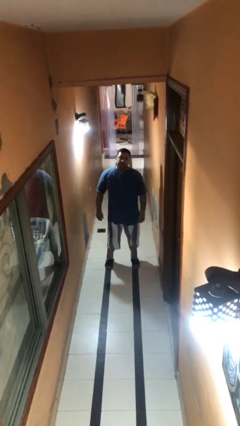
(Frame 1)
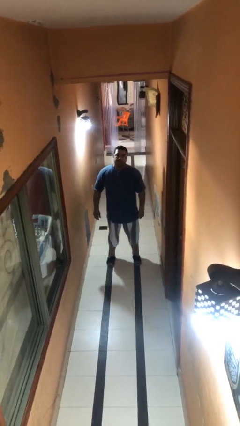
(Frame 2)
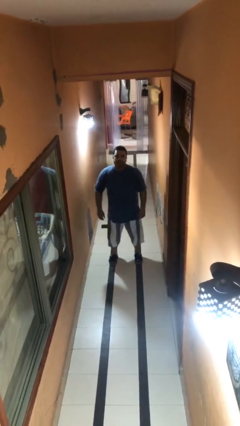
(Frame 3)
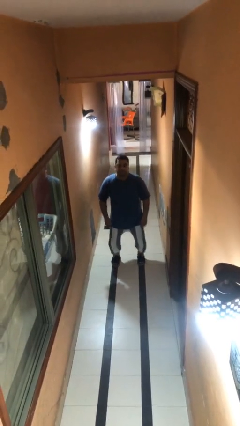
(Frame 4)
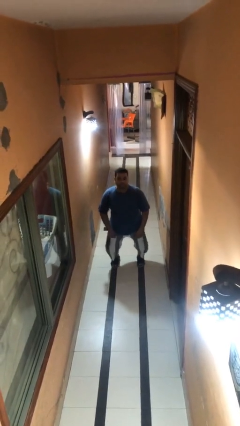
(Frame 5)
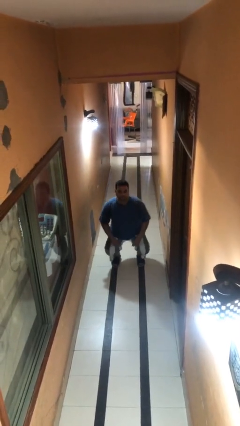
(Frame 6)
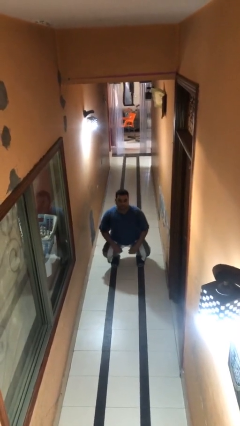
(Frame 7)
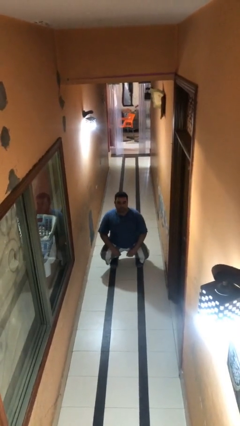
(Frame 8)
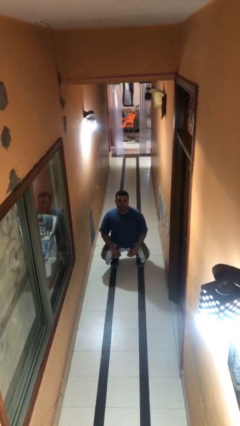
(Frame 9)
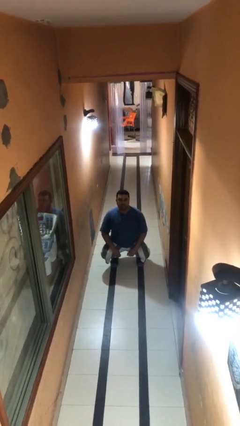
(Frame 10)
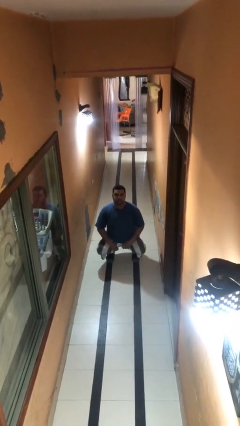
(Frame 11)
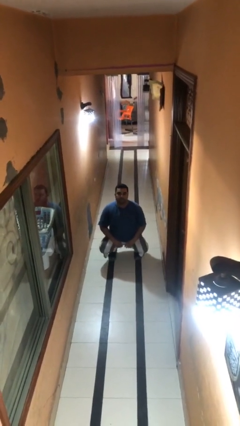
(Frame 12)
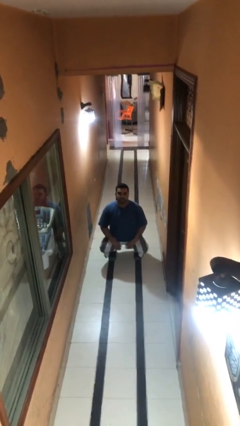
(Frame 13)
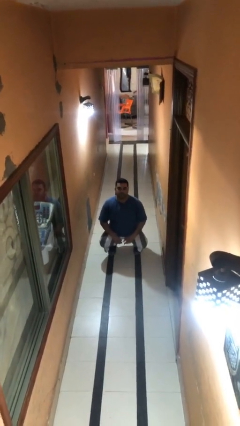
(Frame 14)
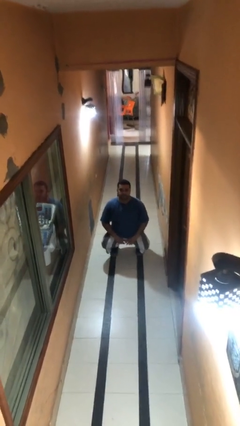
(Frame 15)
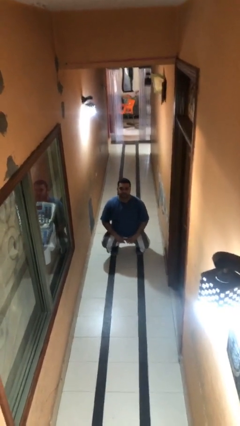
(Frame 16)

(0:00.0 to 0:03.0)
person squats

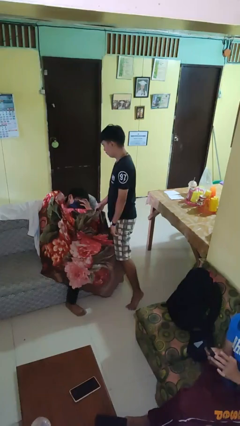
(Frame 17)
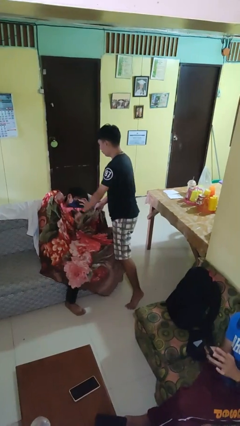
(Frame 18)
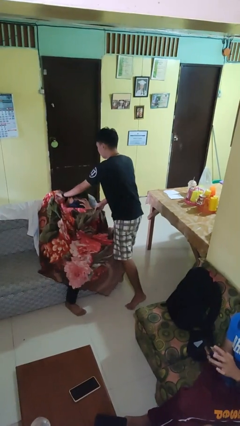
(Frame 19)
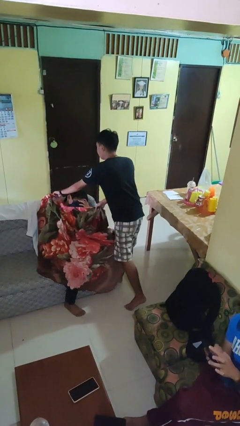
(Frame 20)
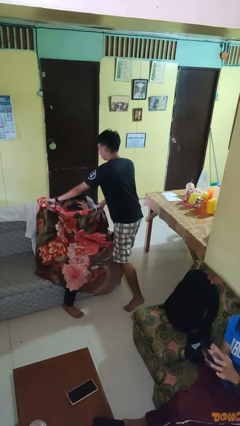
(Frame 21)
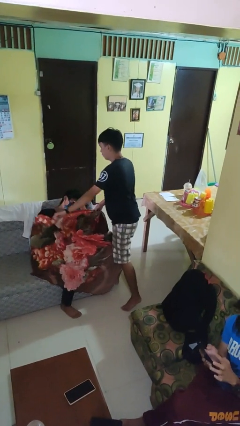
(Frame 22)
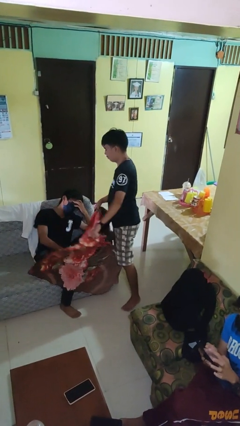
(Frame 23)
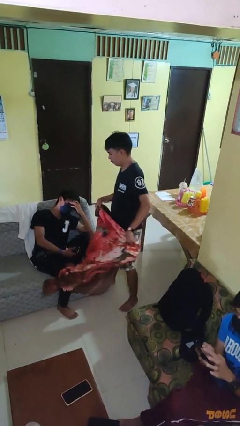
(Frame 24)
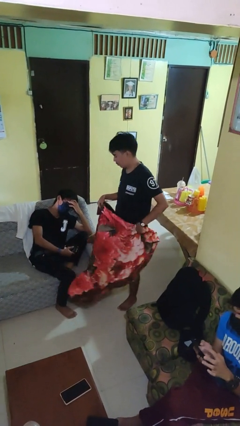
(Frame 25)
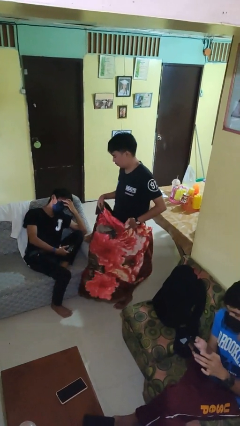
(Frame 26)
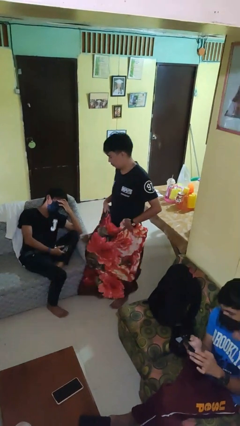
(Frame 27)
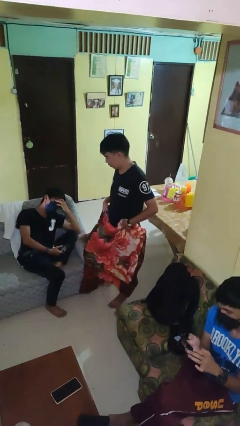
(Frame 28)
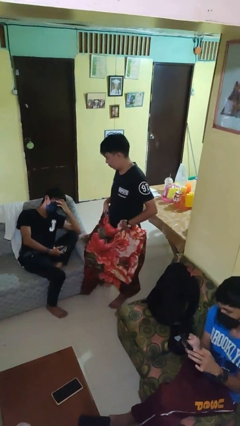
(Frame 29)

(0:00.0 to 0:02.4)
person uncovers friend with blanket

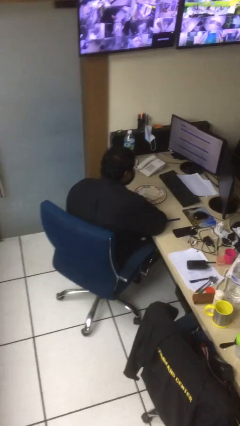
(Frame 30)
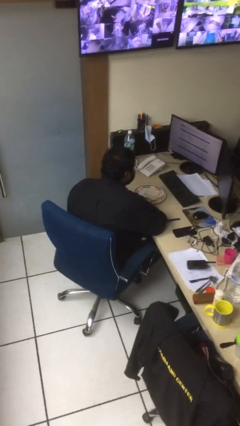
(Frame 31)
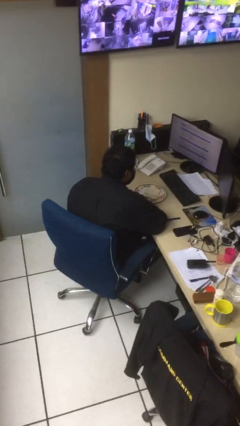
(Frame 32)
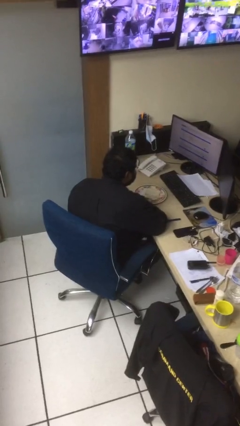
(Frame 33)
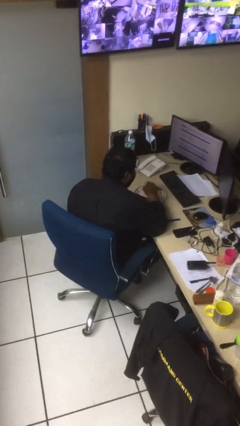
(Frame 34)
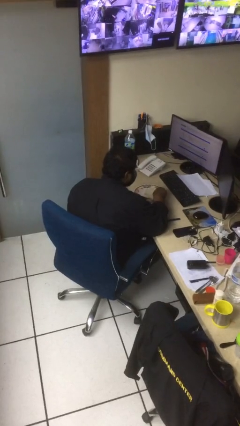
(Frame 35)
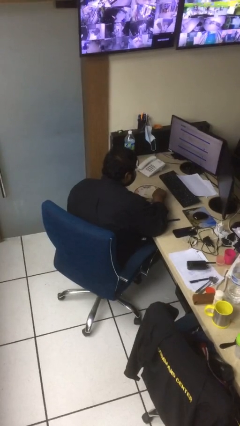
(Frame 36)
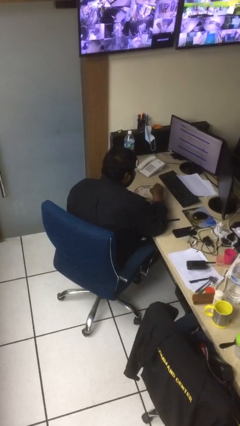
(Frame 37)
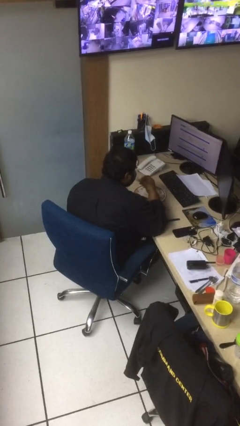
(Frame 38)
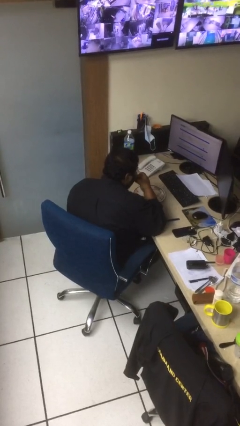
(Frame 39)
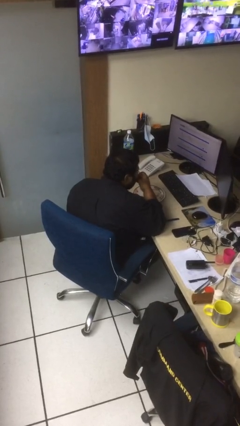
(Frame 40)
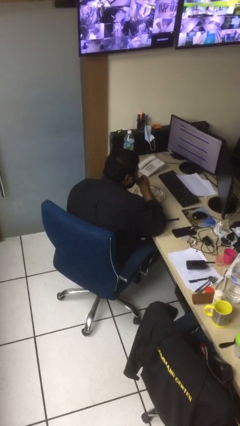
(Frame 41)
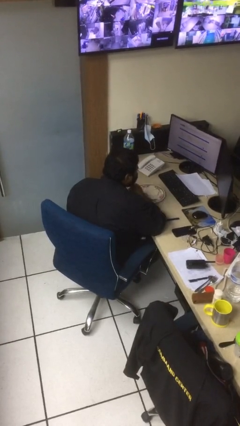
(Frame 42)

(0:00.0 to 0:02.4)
person eats with hands

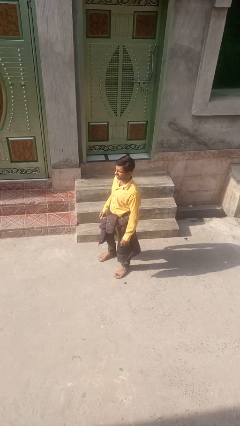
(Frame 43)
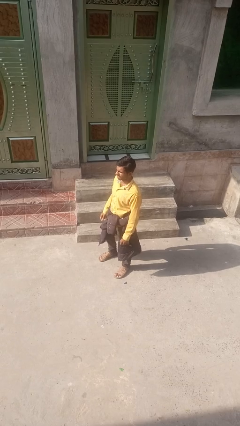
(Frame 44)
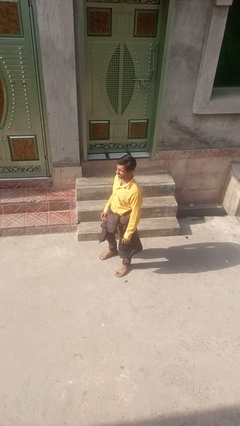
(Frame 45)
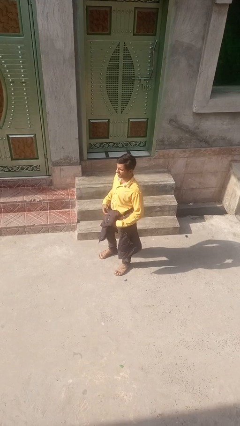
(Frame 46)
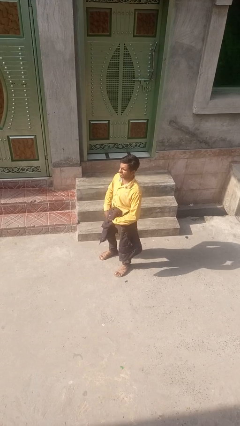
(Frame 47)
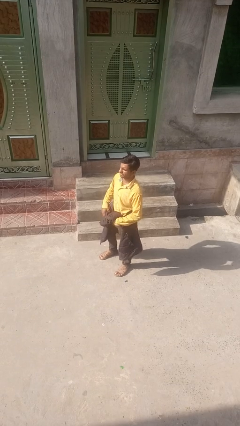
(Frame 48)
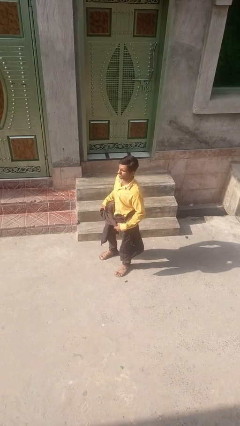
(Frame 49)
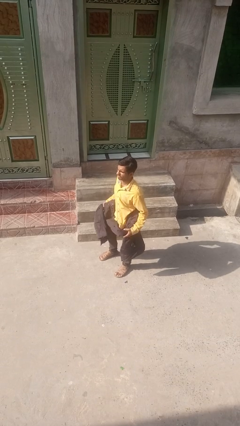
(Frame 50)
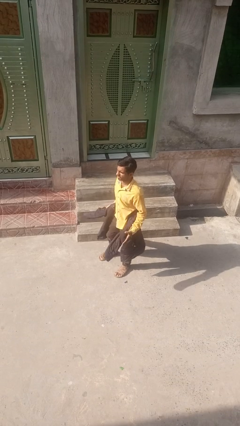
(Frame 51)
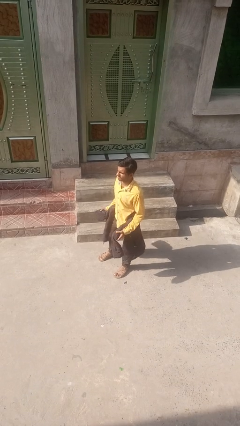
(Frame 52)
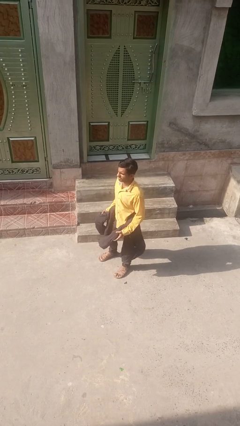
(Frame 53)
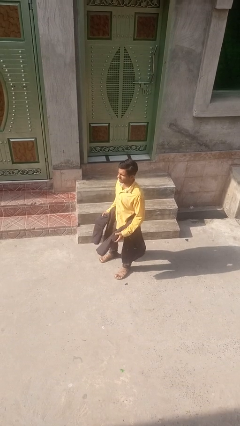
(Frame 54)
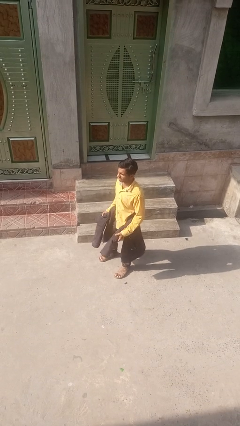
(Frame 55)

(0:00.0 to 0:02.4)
person unties jacket around waist

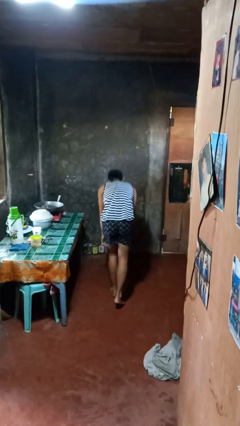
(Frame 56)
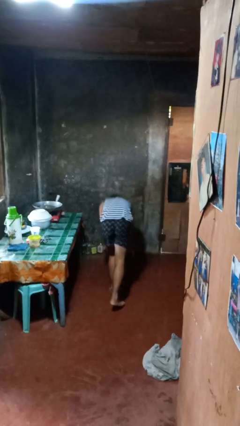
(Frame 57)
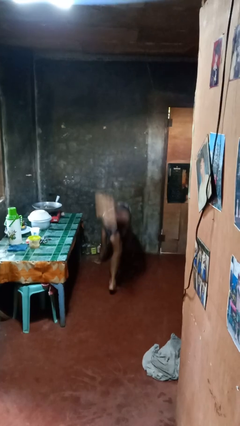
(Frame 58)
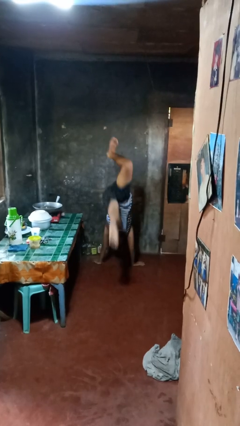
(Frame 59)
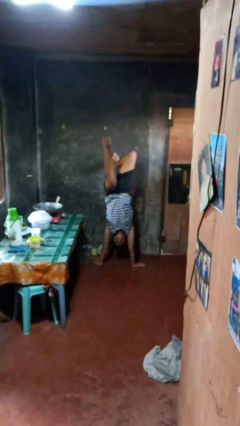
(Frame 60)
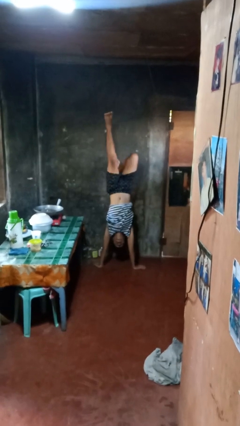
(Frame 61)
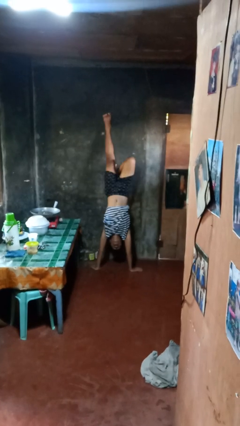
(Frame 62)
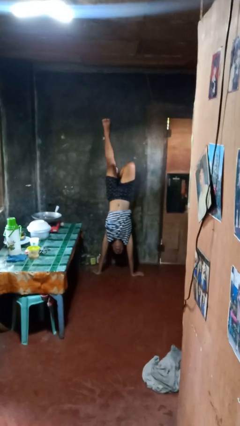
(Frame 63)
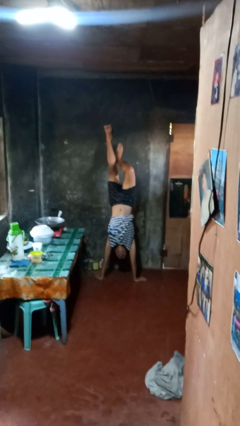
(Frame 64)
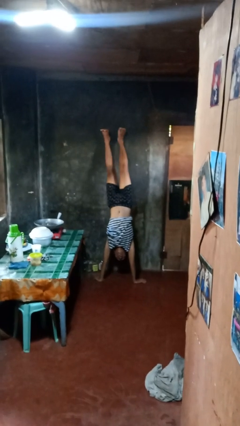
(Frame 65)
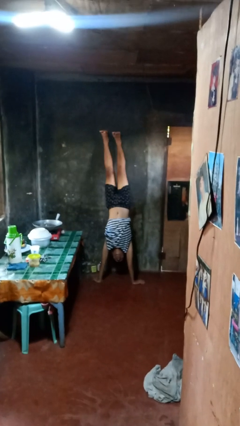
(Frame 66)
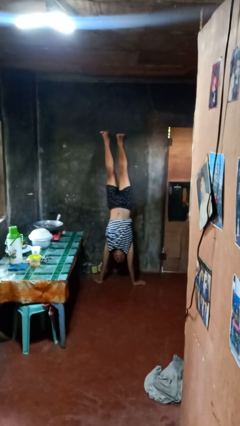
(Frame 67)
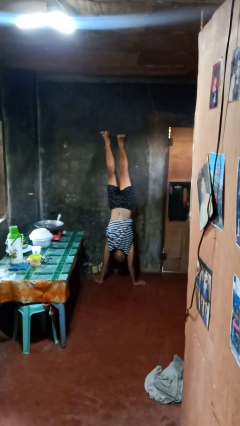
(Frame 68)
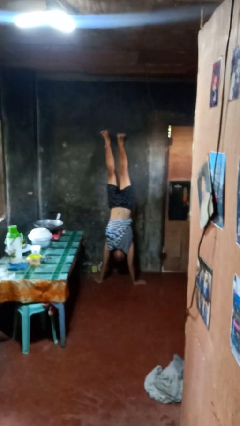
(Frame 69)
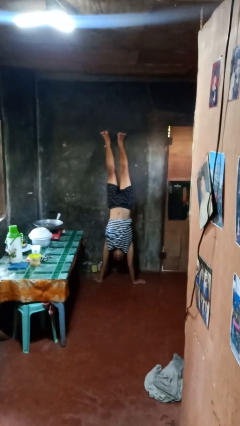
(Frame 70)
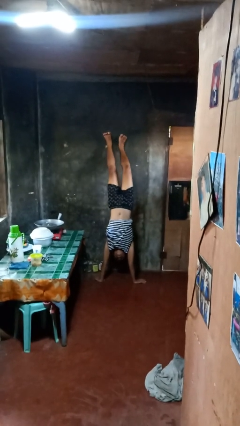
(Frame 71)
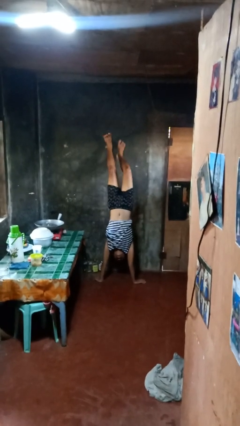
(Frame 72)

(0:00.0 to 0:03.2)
person handstand

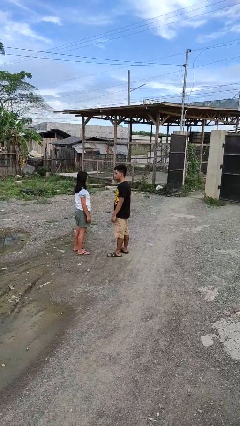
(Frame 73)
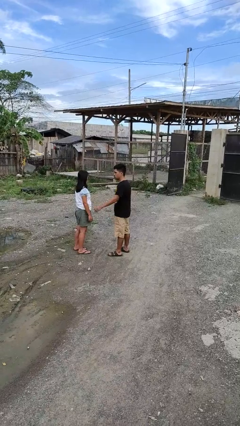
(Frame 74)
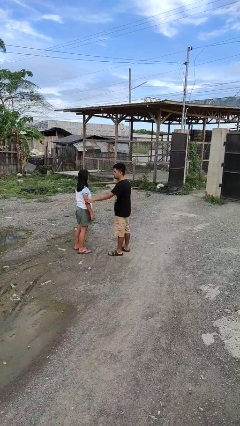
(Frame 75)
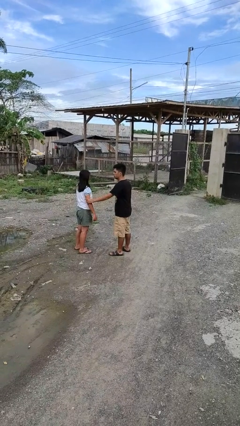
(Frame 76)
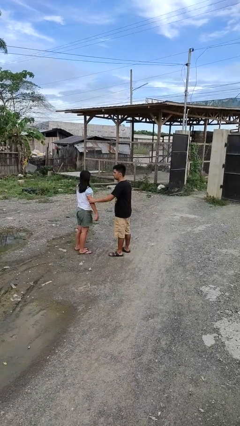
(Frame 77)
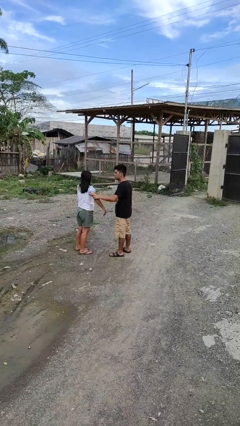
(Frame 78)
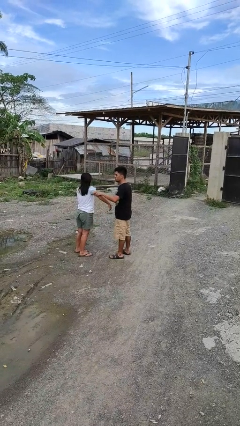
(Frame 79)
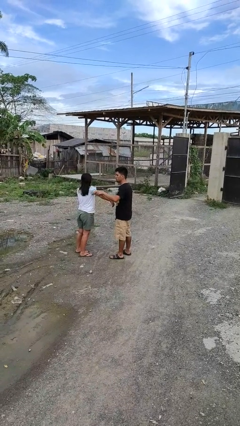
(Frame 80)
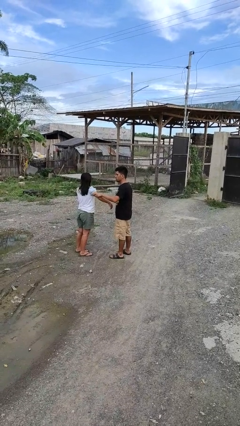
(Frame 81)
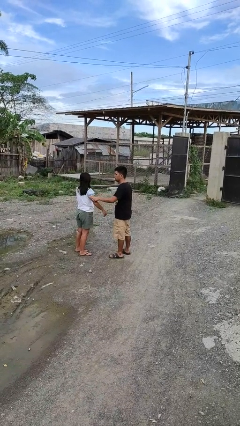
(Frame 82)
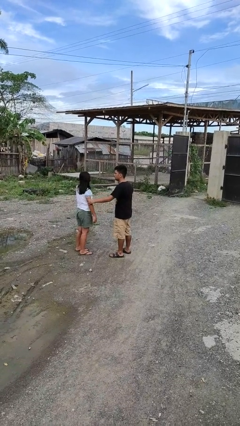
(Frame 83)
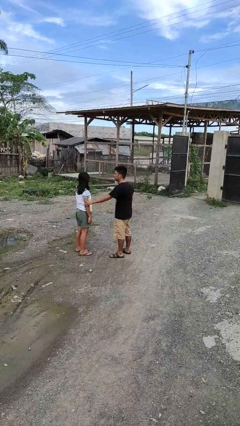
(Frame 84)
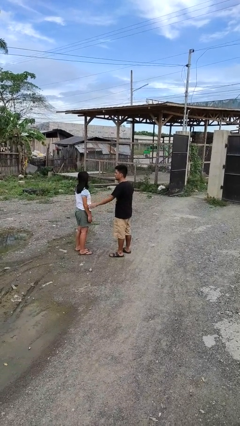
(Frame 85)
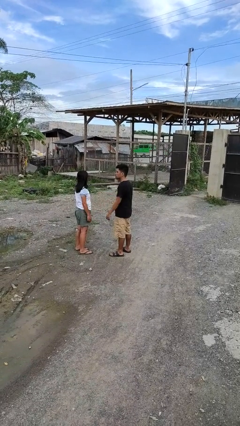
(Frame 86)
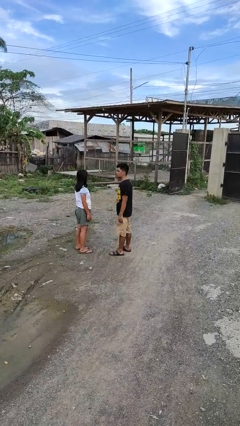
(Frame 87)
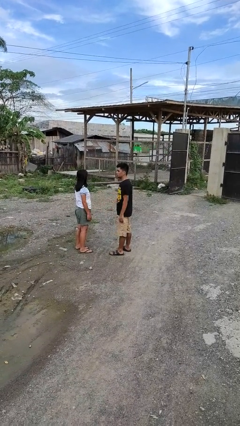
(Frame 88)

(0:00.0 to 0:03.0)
person grabs person by bicep

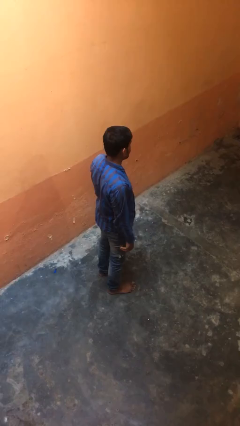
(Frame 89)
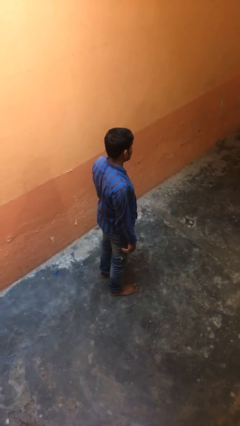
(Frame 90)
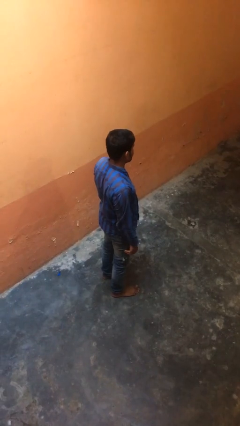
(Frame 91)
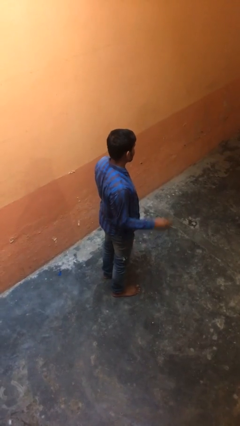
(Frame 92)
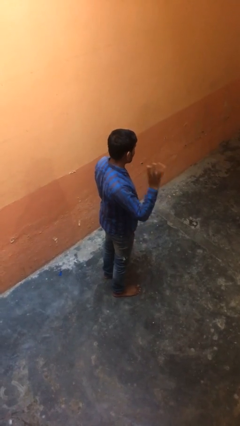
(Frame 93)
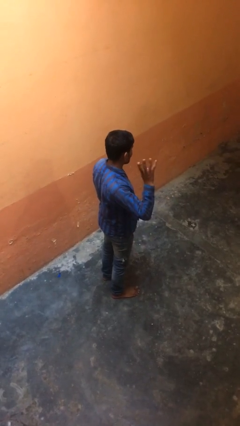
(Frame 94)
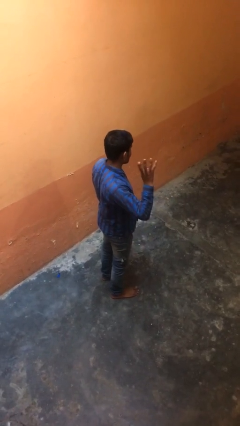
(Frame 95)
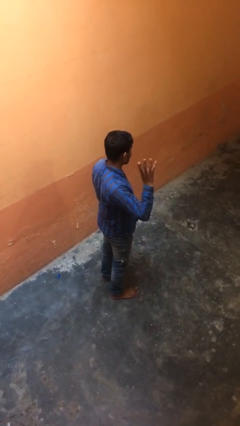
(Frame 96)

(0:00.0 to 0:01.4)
person gestures number four
